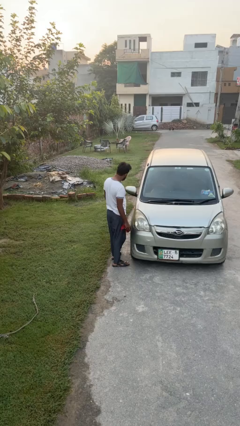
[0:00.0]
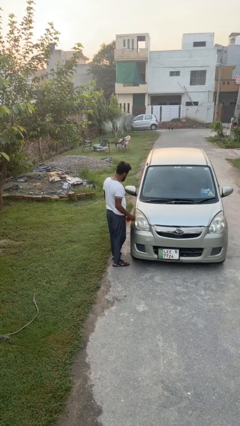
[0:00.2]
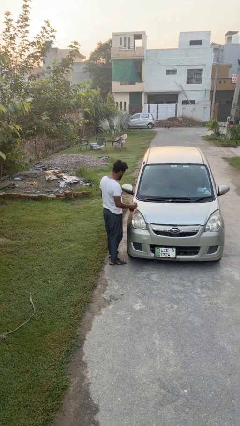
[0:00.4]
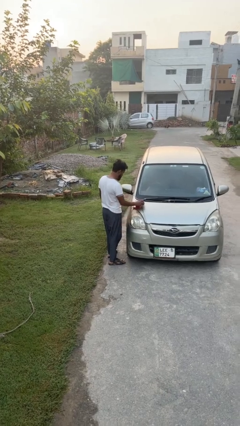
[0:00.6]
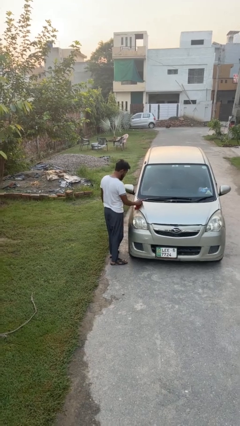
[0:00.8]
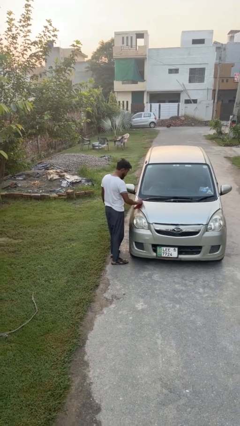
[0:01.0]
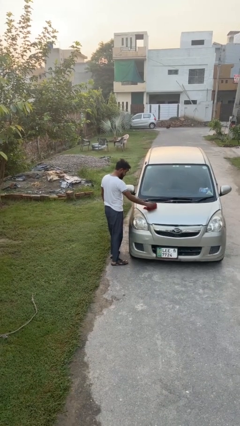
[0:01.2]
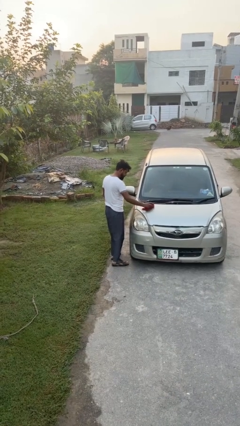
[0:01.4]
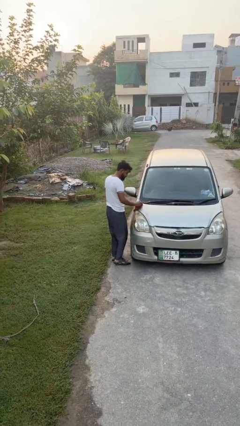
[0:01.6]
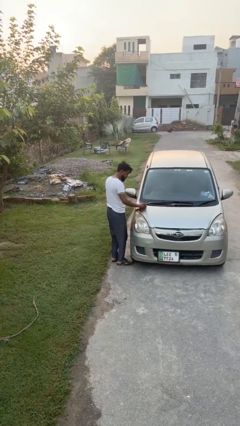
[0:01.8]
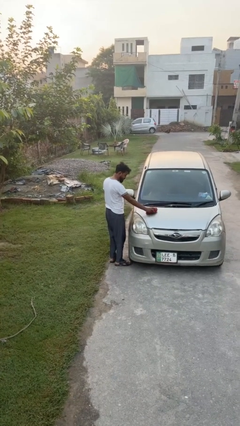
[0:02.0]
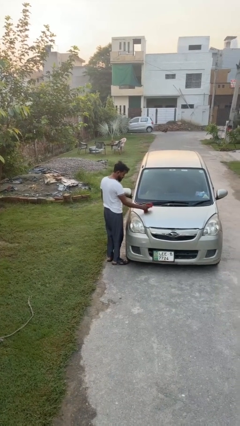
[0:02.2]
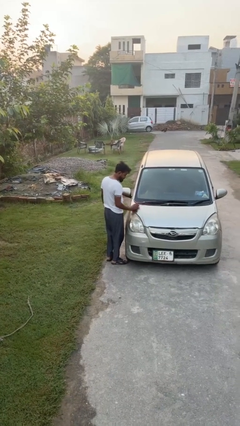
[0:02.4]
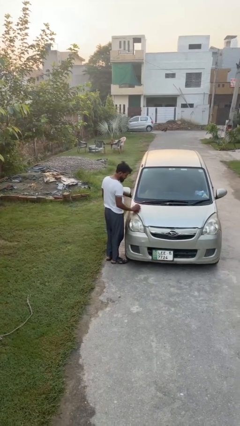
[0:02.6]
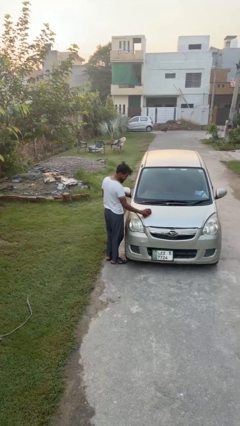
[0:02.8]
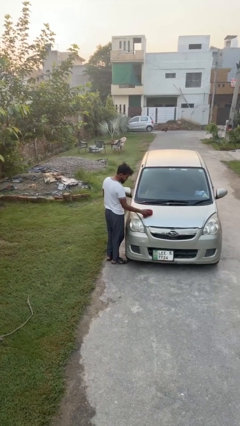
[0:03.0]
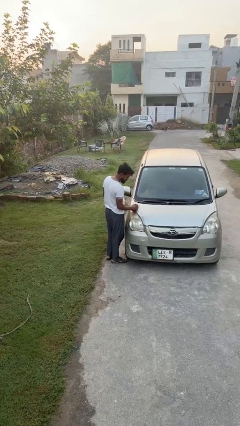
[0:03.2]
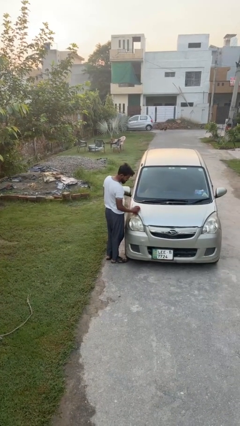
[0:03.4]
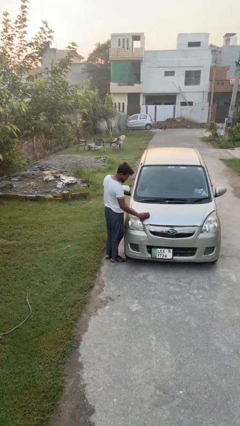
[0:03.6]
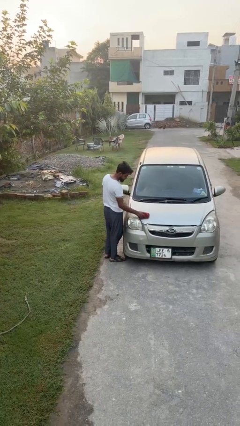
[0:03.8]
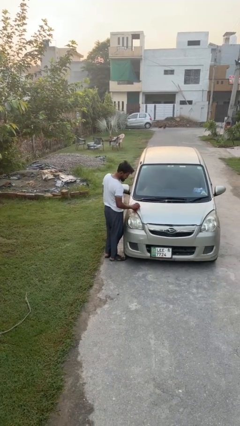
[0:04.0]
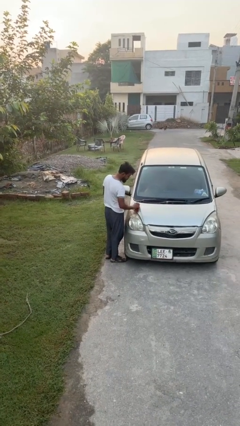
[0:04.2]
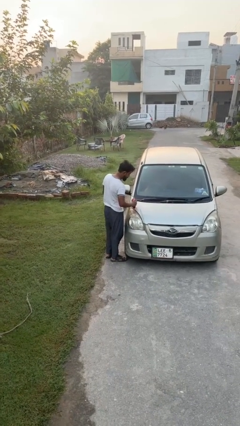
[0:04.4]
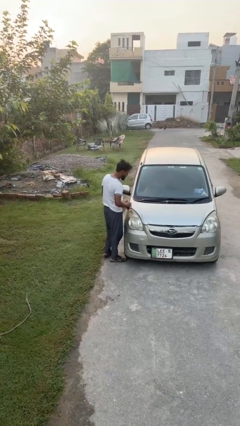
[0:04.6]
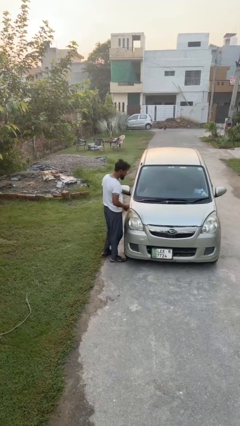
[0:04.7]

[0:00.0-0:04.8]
person polishes car with rag

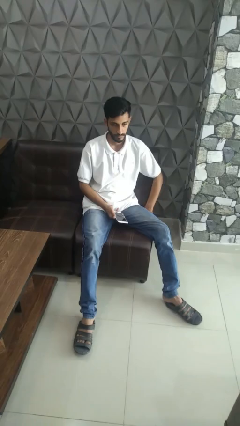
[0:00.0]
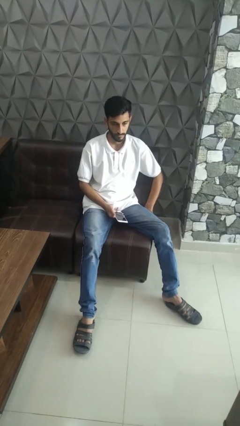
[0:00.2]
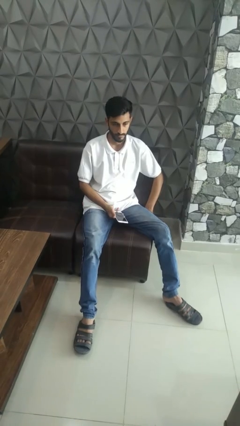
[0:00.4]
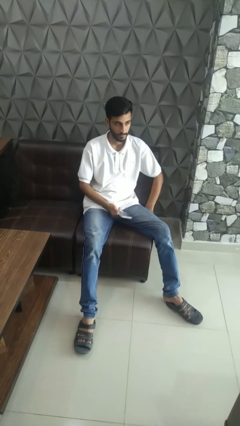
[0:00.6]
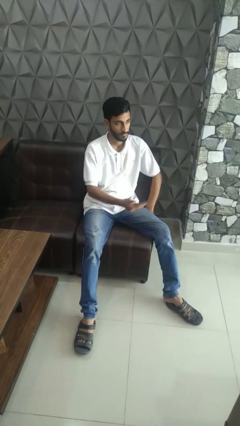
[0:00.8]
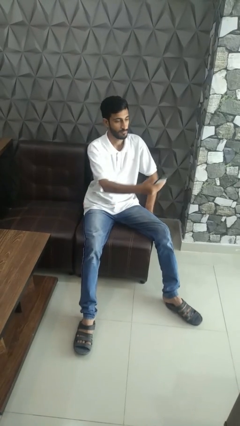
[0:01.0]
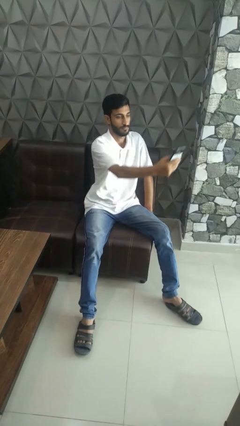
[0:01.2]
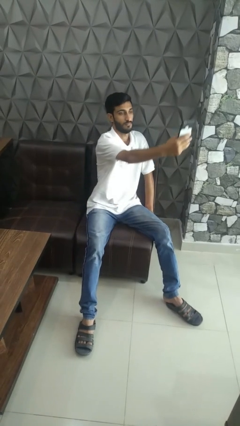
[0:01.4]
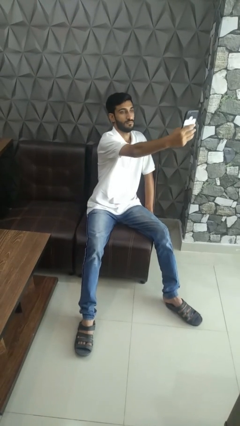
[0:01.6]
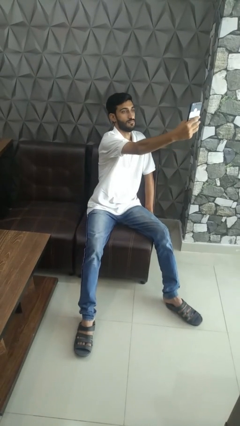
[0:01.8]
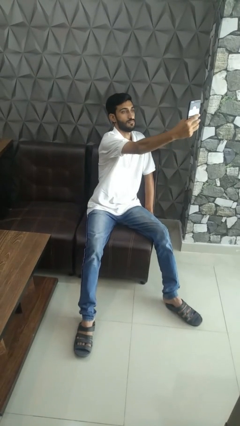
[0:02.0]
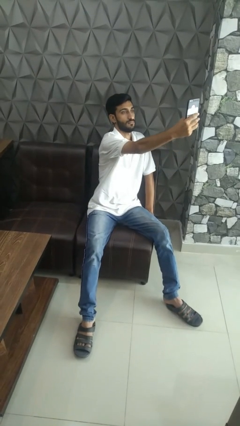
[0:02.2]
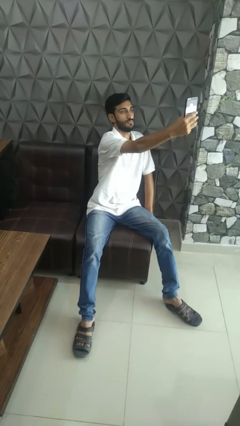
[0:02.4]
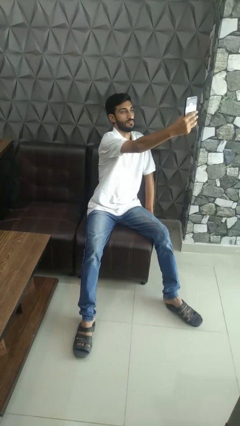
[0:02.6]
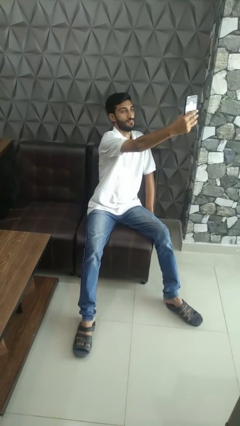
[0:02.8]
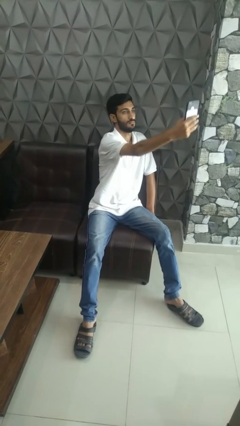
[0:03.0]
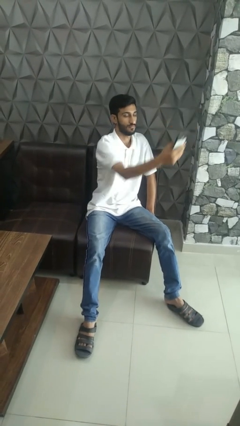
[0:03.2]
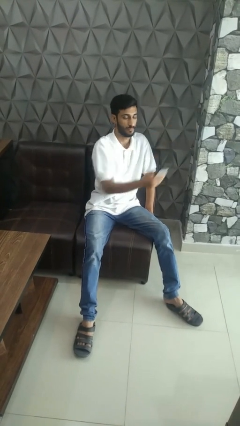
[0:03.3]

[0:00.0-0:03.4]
person takes selfie

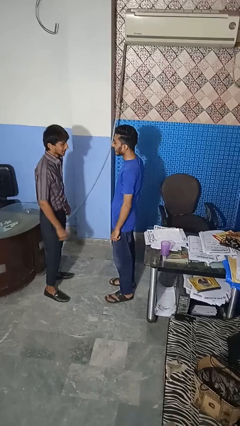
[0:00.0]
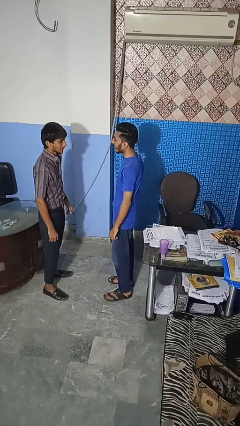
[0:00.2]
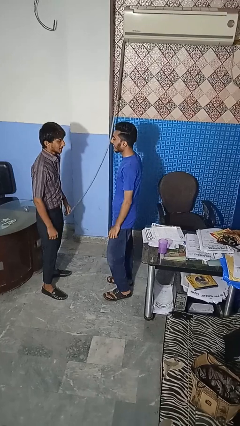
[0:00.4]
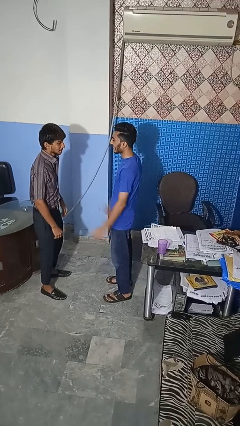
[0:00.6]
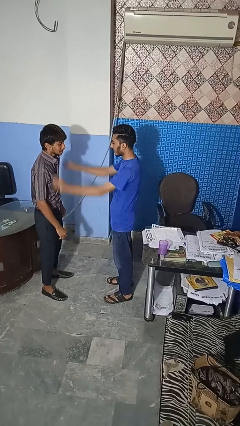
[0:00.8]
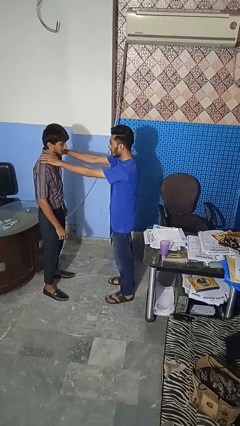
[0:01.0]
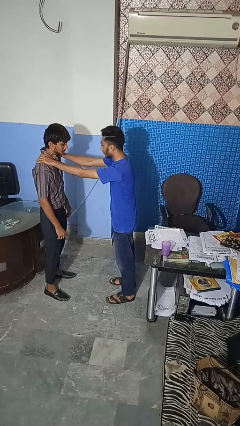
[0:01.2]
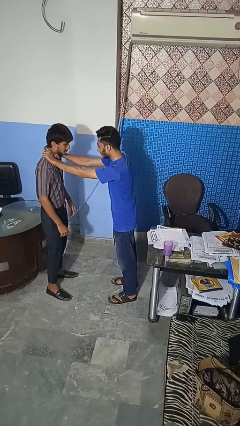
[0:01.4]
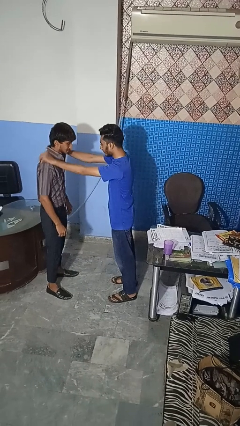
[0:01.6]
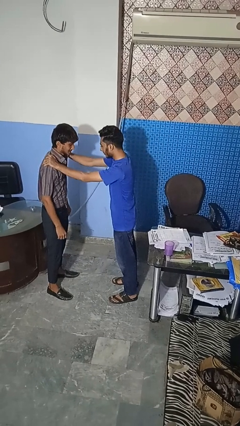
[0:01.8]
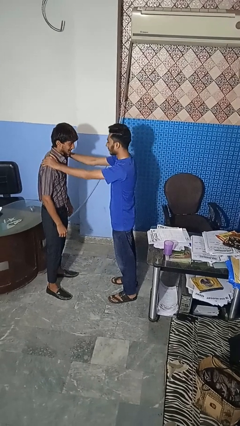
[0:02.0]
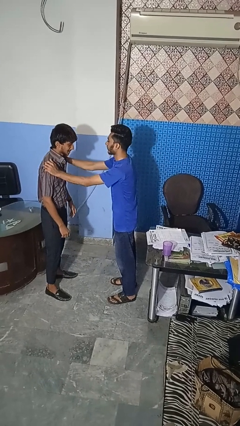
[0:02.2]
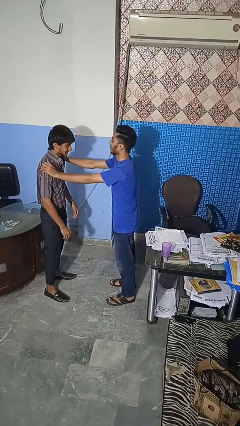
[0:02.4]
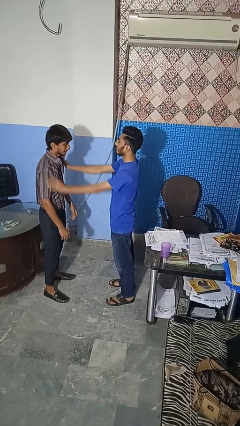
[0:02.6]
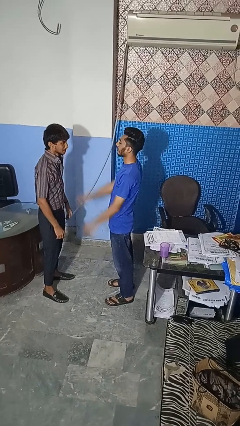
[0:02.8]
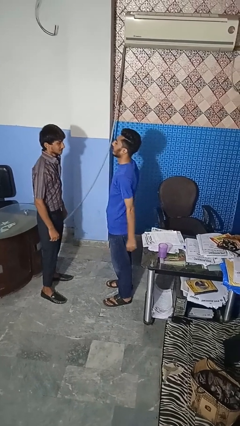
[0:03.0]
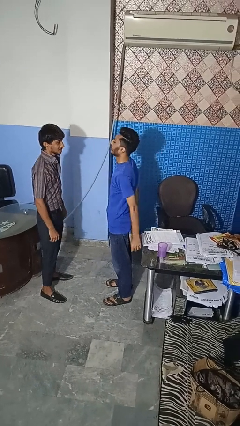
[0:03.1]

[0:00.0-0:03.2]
person pounds shoulders of person

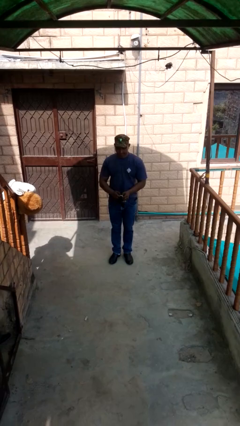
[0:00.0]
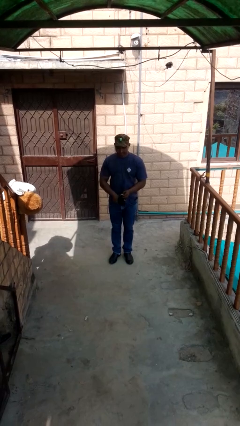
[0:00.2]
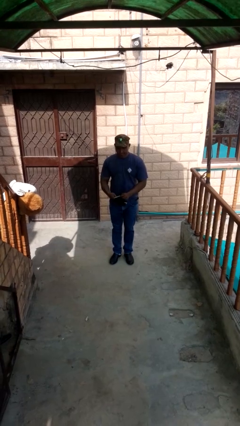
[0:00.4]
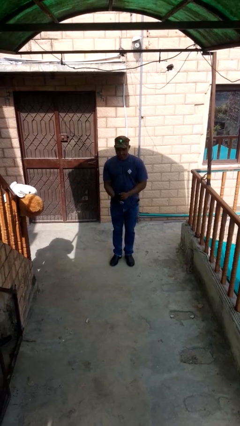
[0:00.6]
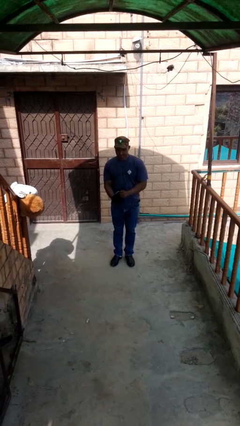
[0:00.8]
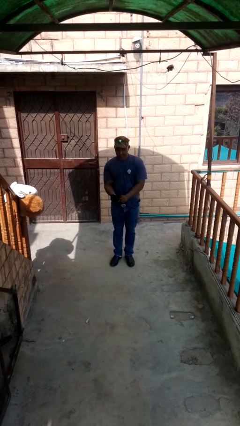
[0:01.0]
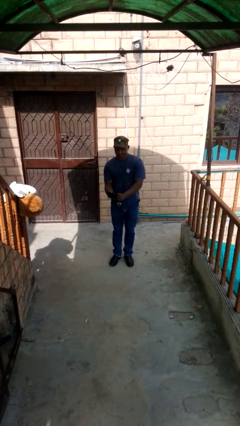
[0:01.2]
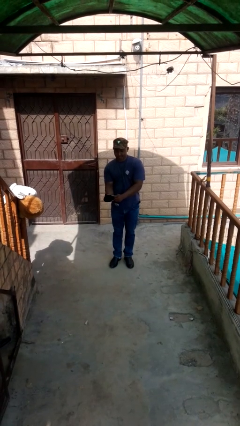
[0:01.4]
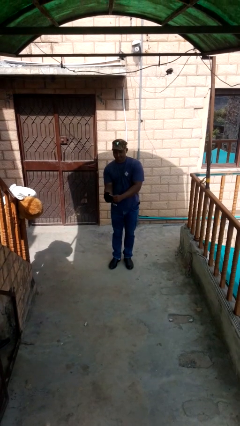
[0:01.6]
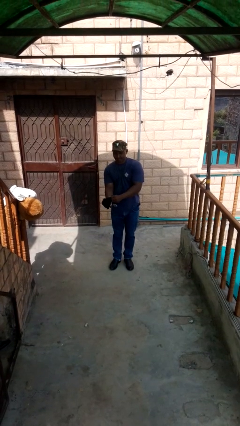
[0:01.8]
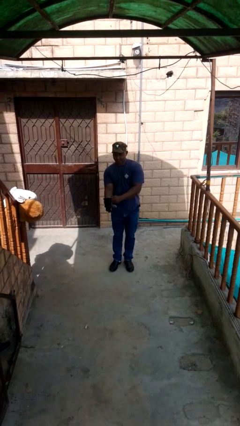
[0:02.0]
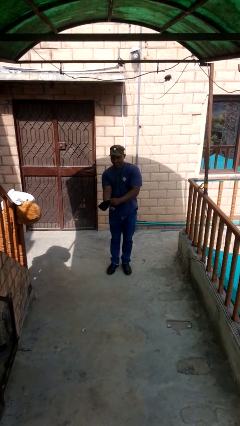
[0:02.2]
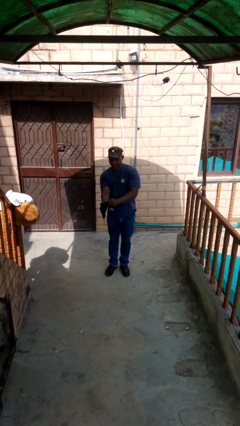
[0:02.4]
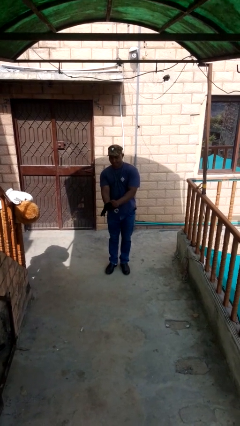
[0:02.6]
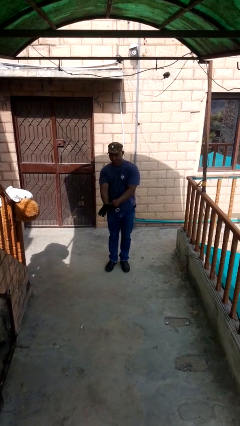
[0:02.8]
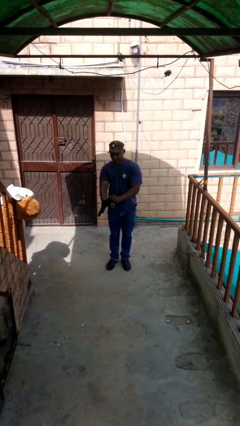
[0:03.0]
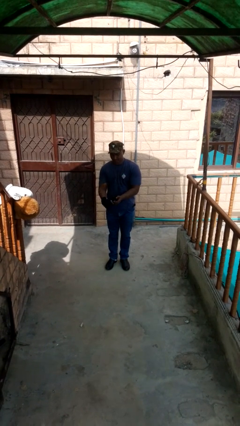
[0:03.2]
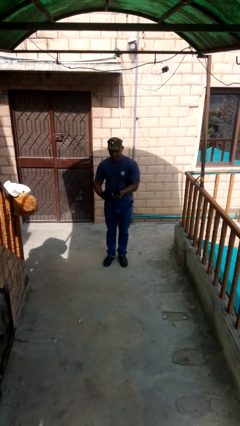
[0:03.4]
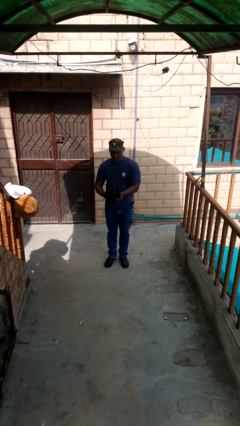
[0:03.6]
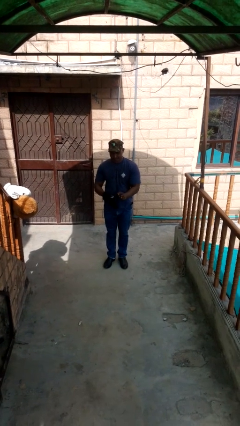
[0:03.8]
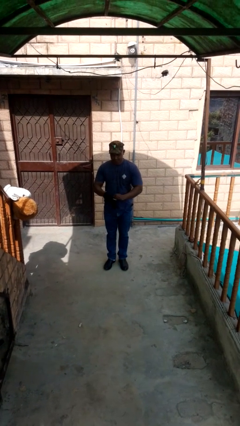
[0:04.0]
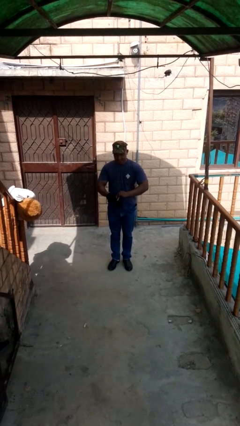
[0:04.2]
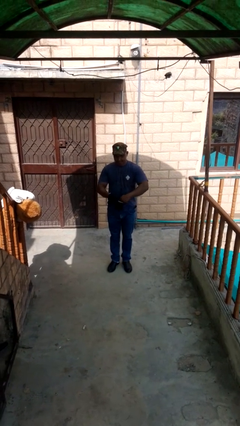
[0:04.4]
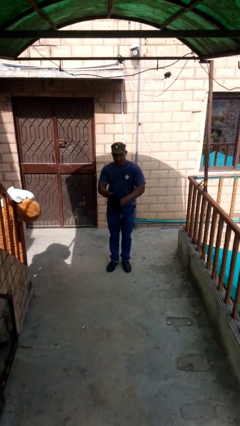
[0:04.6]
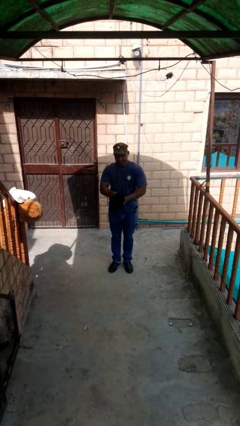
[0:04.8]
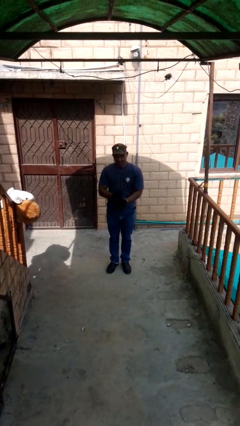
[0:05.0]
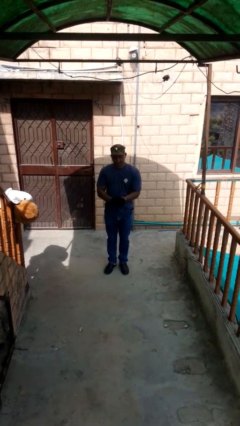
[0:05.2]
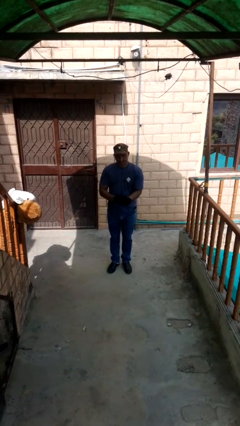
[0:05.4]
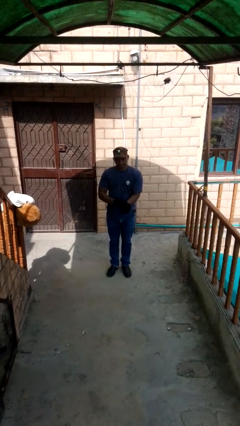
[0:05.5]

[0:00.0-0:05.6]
person puts on gloves

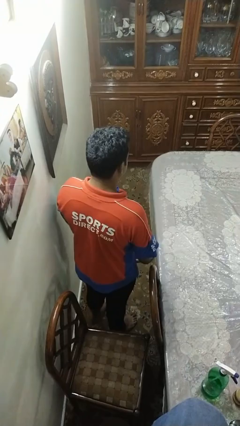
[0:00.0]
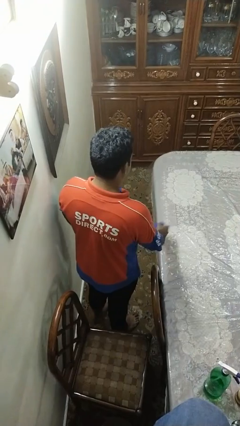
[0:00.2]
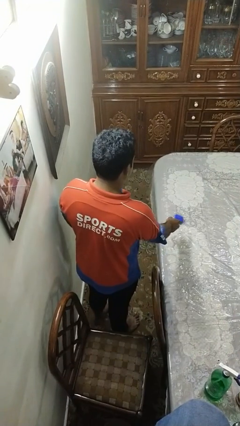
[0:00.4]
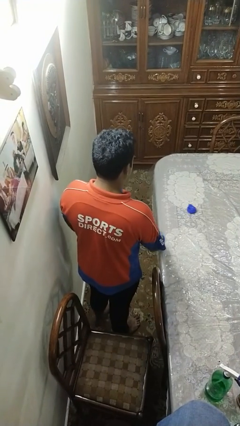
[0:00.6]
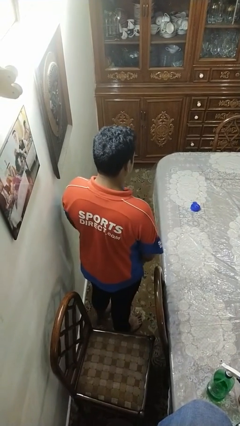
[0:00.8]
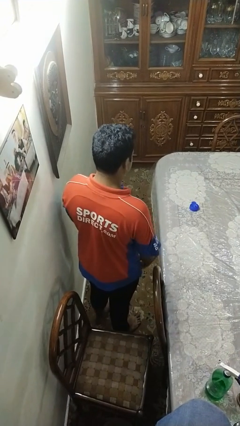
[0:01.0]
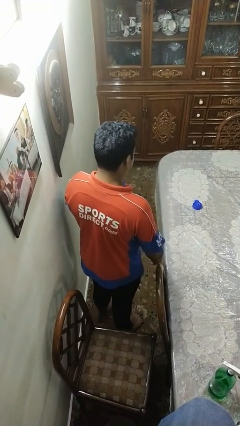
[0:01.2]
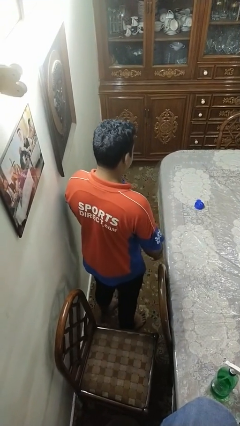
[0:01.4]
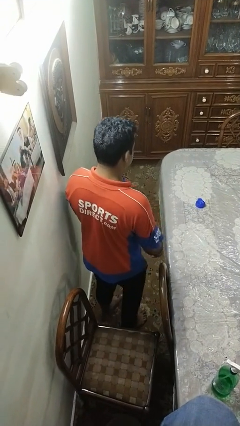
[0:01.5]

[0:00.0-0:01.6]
person throws object on table
